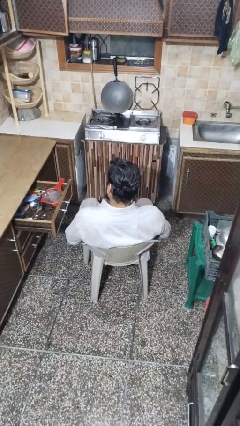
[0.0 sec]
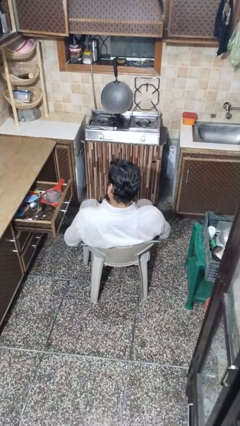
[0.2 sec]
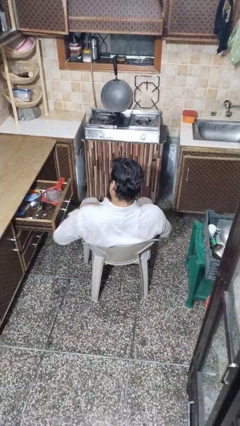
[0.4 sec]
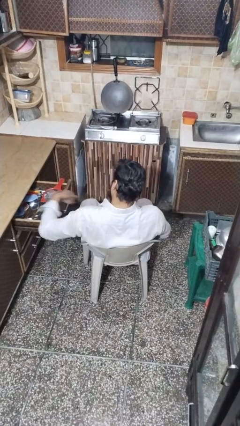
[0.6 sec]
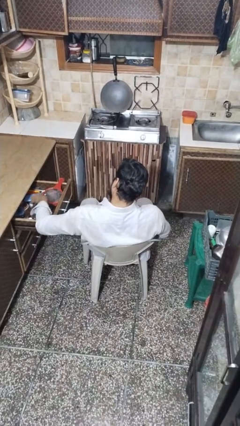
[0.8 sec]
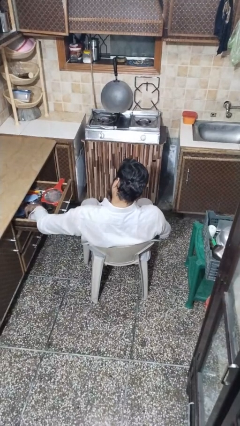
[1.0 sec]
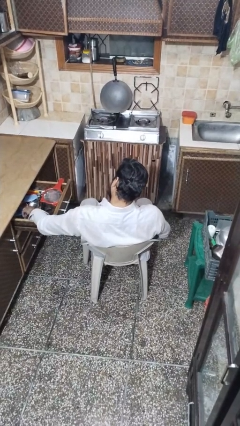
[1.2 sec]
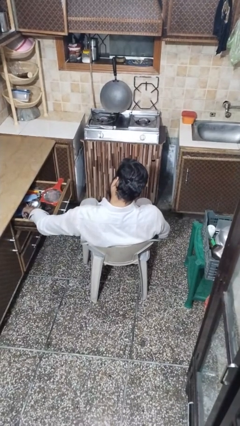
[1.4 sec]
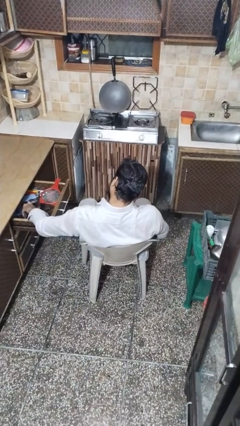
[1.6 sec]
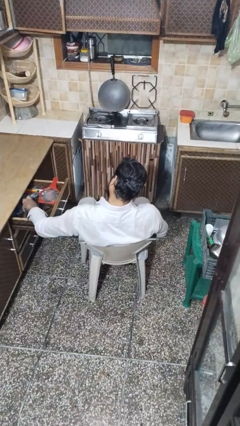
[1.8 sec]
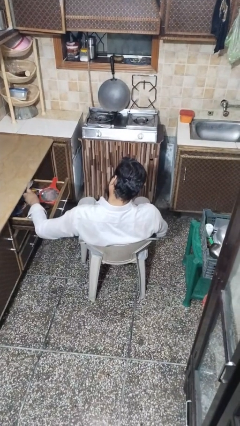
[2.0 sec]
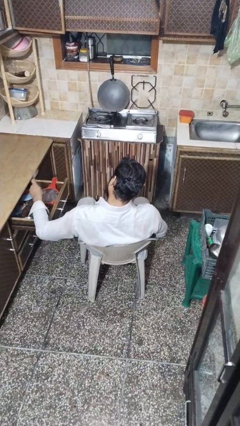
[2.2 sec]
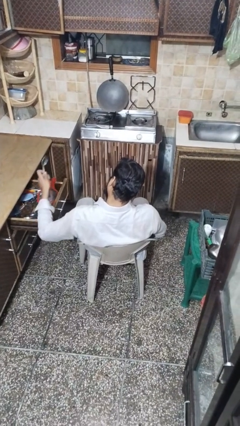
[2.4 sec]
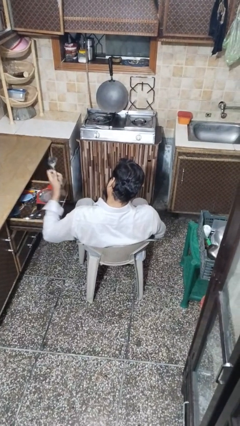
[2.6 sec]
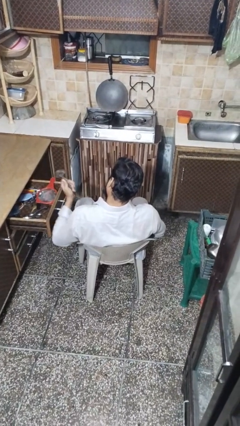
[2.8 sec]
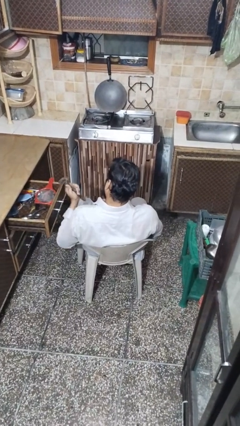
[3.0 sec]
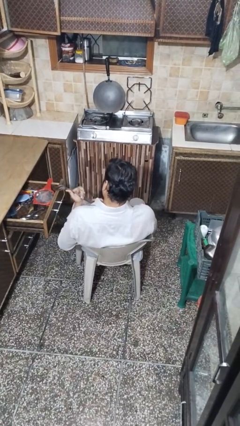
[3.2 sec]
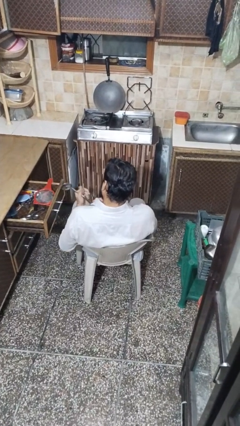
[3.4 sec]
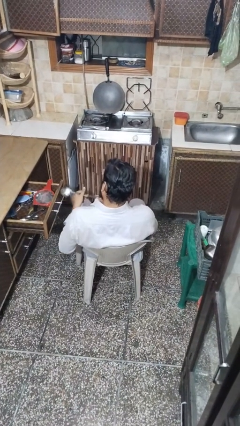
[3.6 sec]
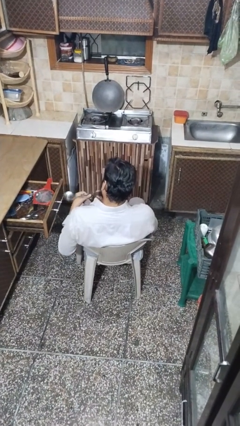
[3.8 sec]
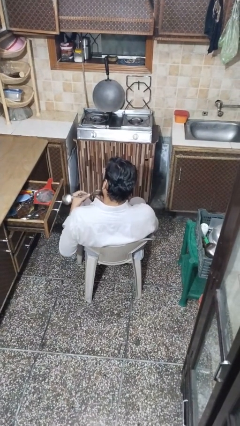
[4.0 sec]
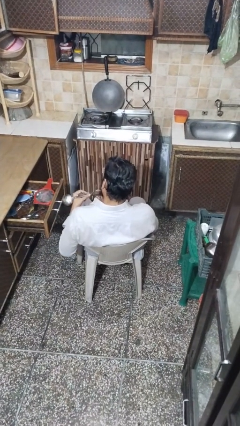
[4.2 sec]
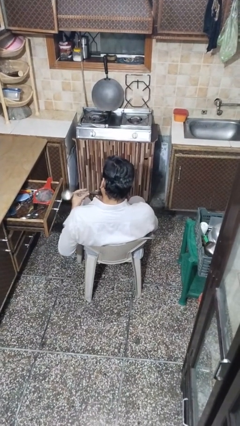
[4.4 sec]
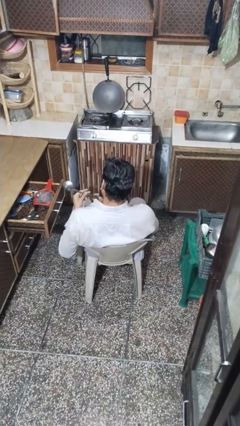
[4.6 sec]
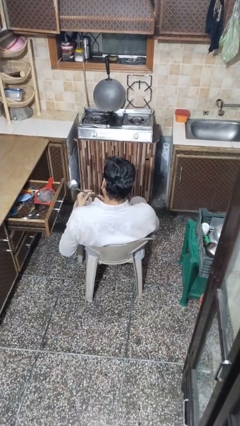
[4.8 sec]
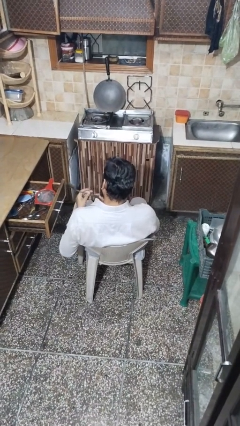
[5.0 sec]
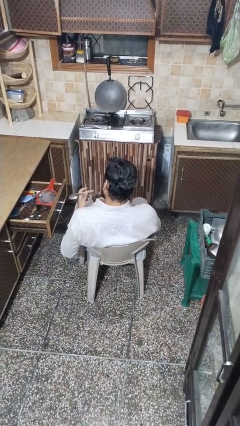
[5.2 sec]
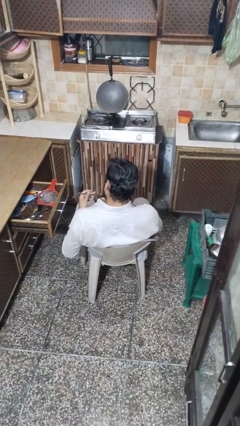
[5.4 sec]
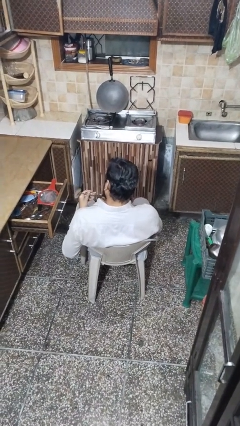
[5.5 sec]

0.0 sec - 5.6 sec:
person takes object from kitchen drawer

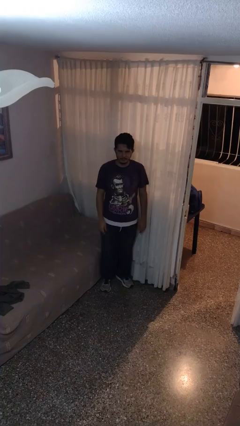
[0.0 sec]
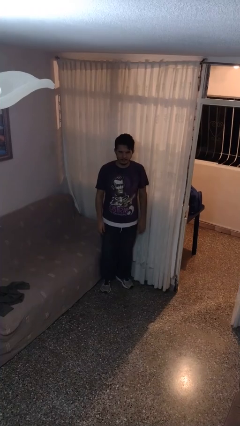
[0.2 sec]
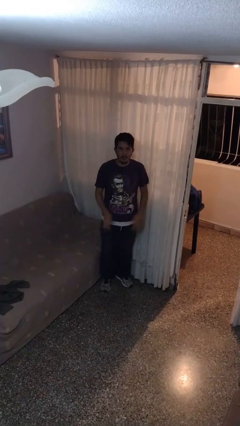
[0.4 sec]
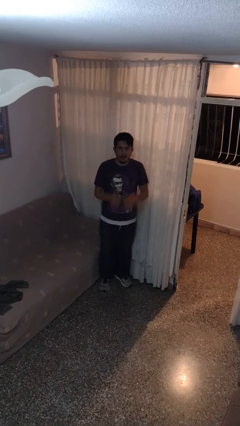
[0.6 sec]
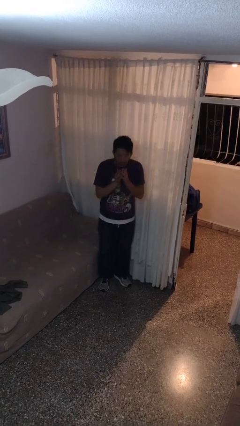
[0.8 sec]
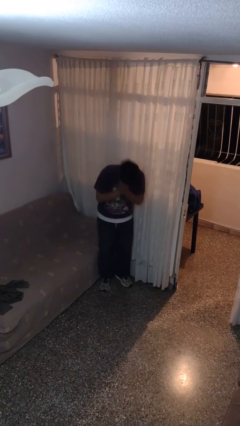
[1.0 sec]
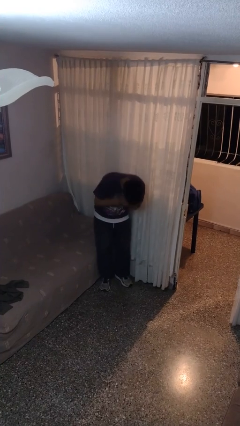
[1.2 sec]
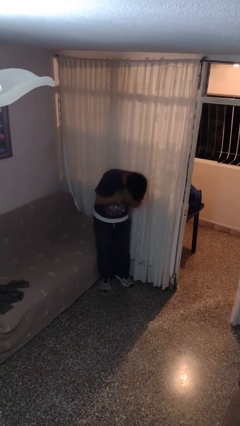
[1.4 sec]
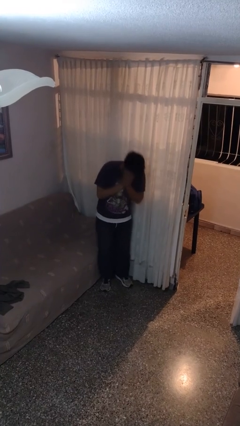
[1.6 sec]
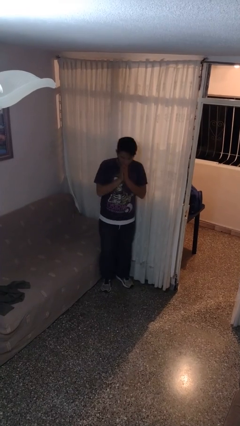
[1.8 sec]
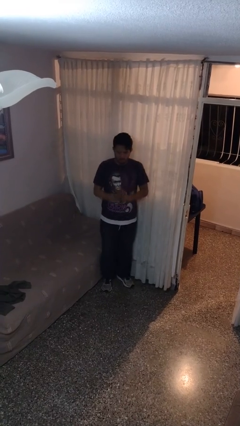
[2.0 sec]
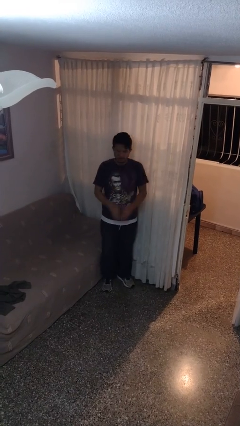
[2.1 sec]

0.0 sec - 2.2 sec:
person sneezes into hand

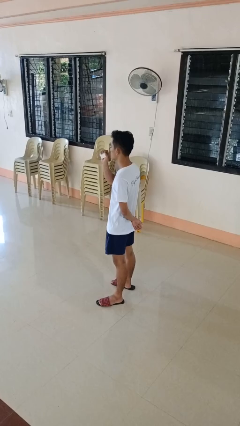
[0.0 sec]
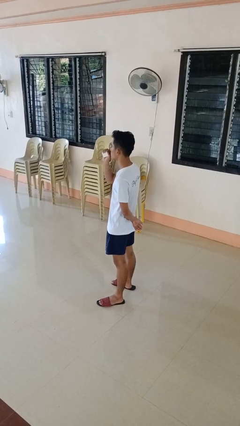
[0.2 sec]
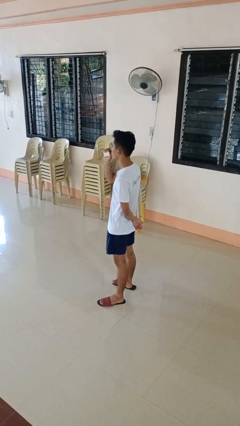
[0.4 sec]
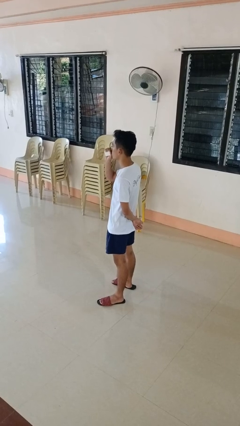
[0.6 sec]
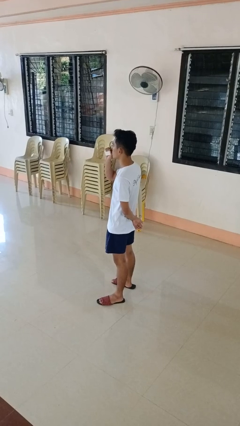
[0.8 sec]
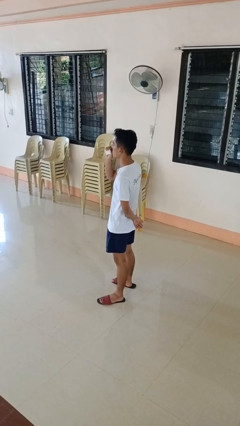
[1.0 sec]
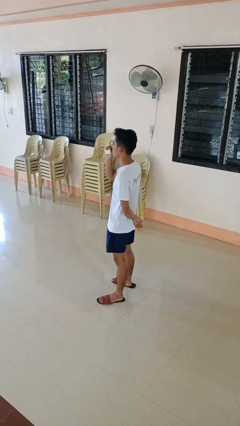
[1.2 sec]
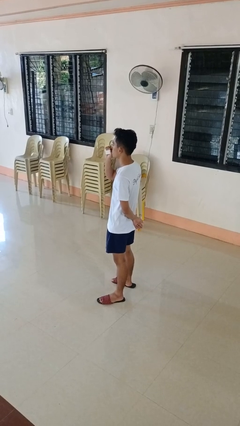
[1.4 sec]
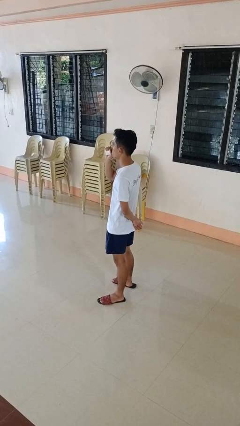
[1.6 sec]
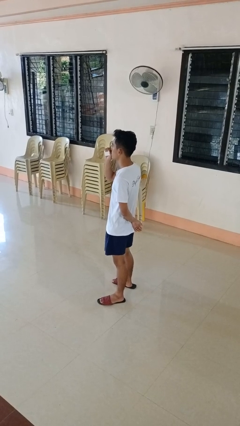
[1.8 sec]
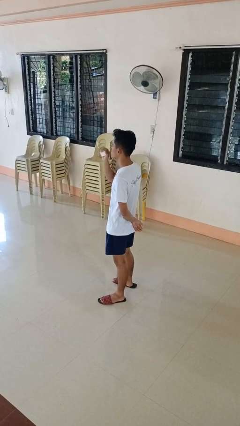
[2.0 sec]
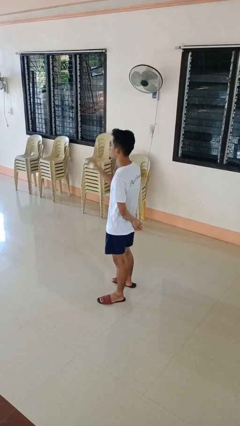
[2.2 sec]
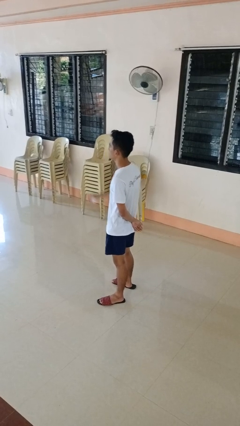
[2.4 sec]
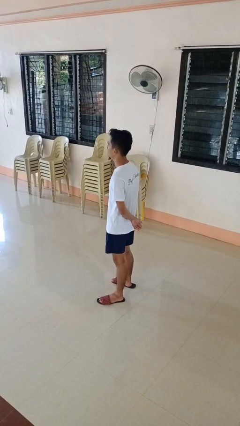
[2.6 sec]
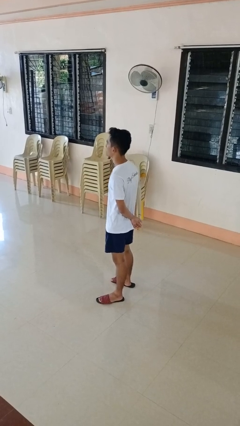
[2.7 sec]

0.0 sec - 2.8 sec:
person vapes

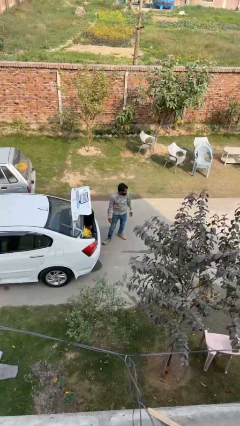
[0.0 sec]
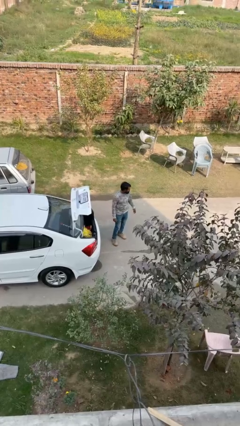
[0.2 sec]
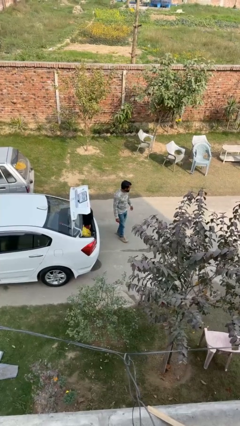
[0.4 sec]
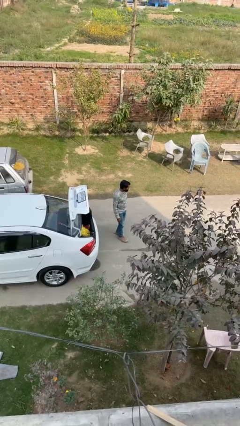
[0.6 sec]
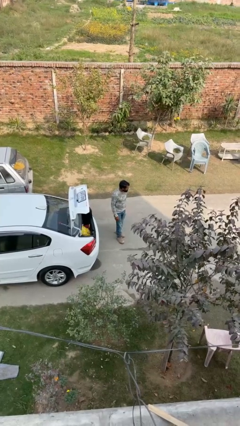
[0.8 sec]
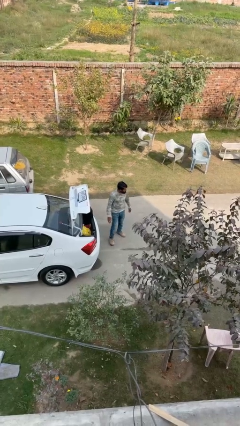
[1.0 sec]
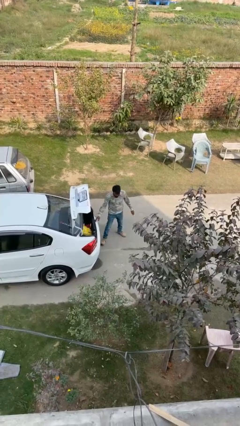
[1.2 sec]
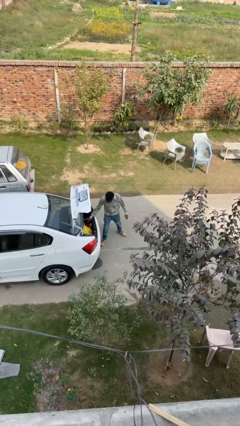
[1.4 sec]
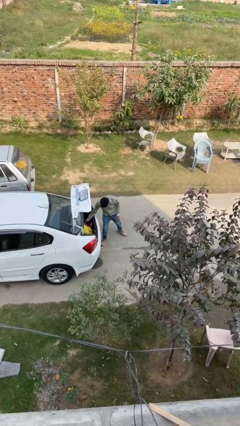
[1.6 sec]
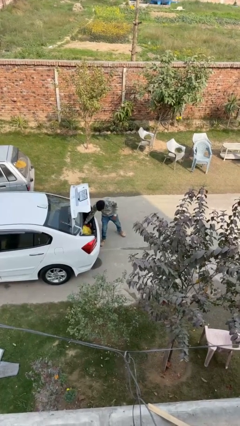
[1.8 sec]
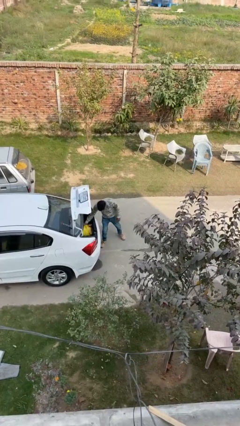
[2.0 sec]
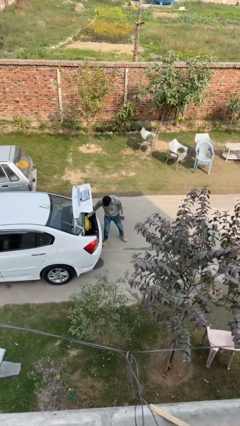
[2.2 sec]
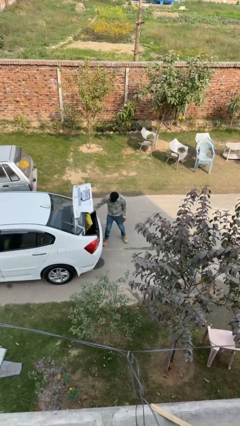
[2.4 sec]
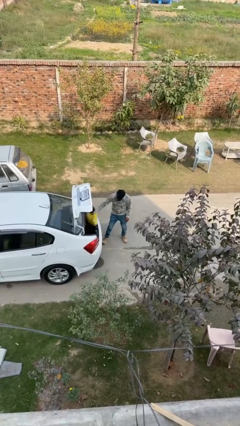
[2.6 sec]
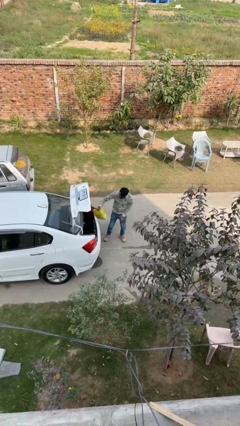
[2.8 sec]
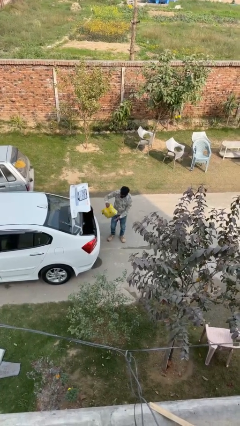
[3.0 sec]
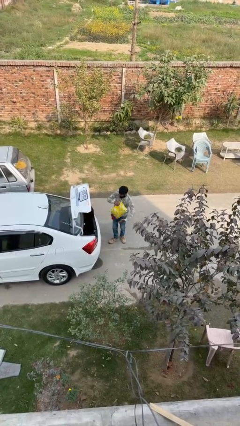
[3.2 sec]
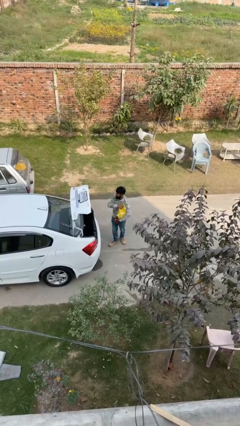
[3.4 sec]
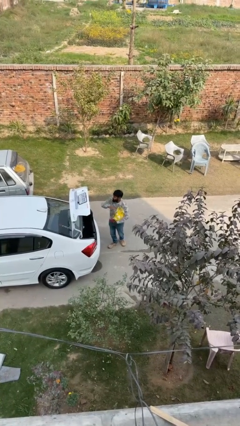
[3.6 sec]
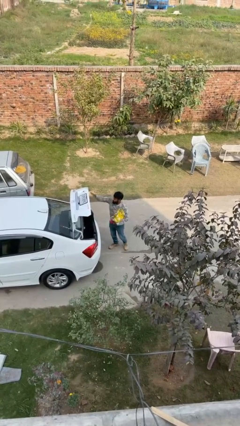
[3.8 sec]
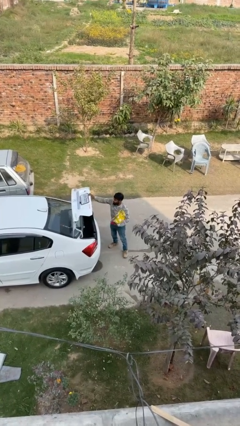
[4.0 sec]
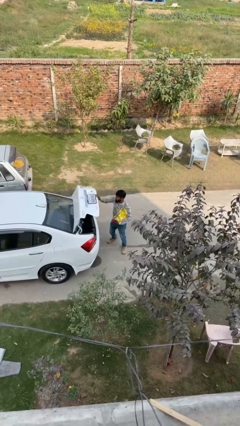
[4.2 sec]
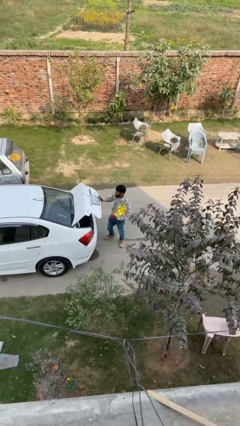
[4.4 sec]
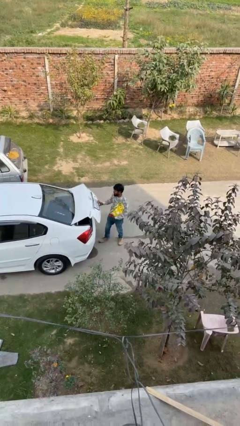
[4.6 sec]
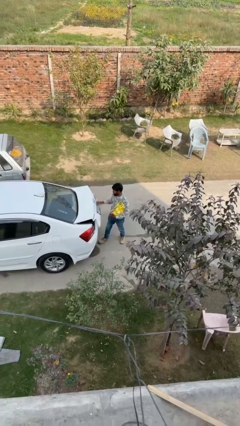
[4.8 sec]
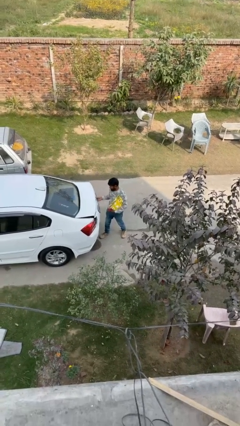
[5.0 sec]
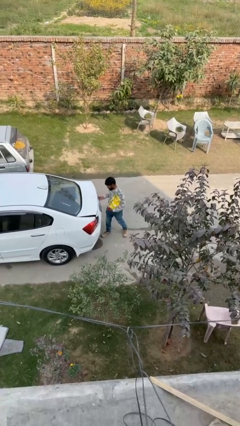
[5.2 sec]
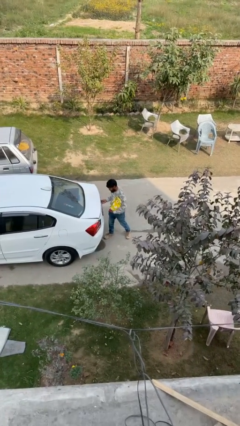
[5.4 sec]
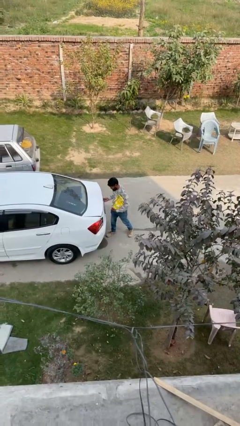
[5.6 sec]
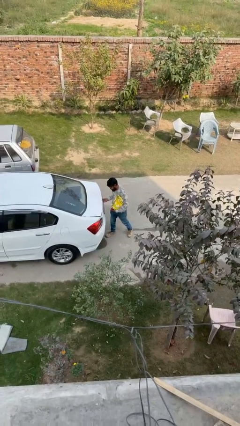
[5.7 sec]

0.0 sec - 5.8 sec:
person unloads car

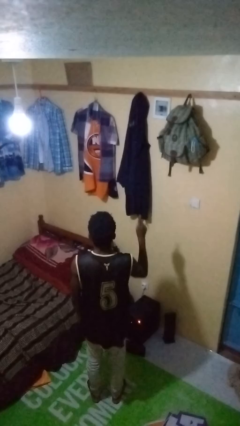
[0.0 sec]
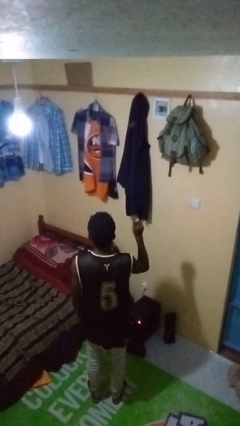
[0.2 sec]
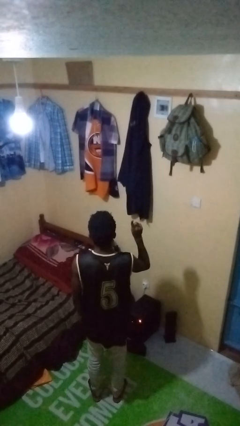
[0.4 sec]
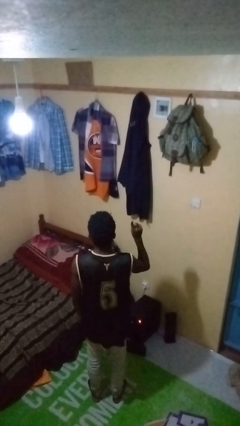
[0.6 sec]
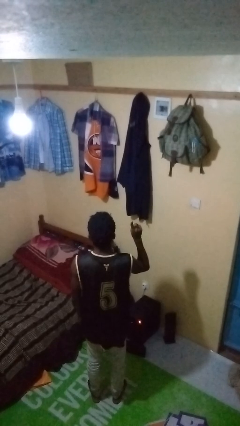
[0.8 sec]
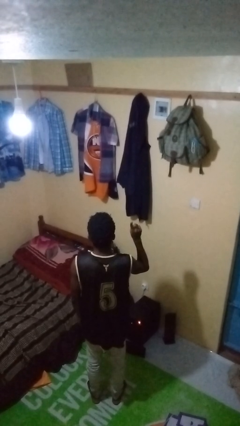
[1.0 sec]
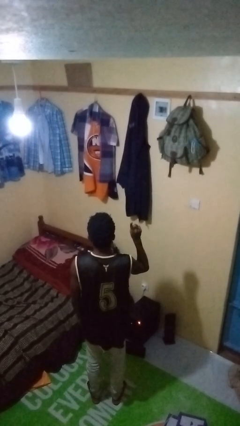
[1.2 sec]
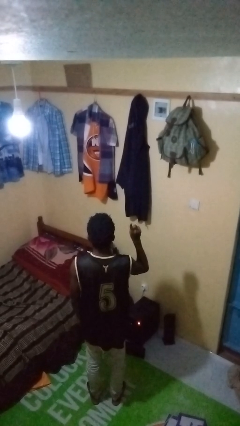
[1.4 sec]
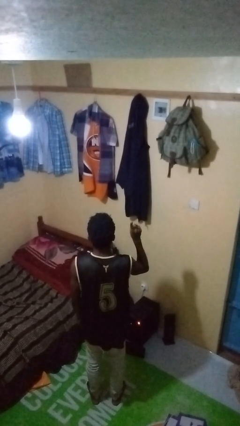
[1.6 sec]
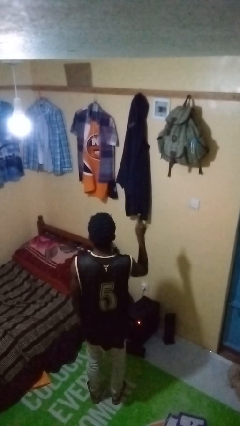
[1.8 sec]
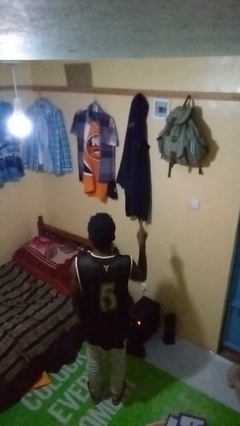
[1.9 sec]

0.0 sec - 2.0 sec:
person gestures number one
